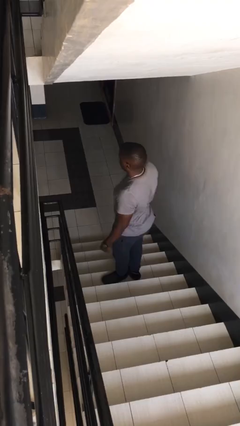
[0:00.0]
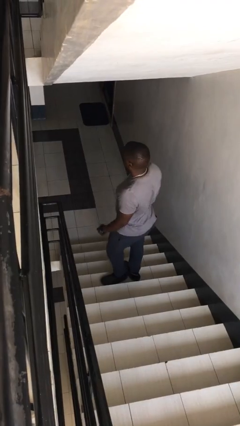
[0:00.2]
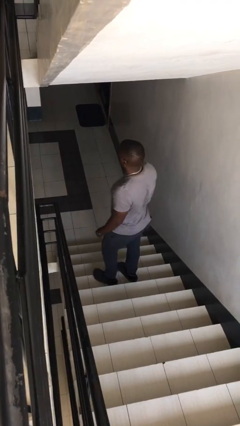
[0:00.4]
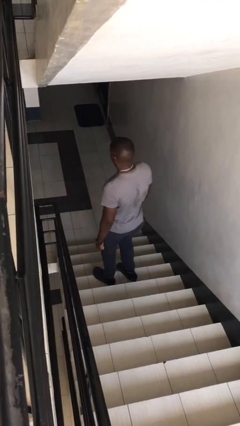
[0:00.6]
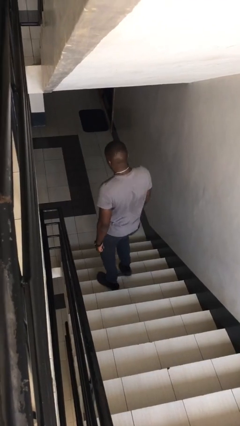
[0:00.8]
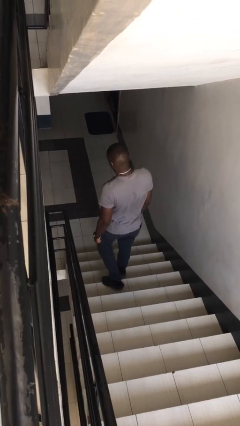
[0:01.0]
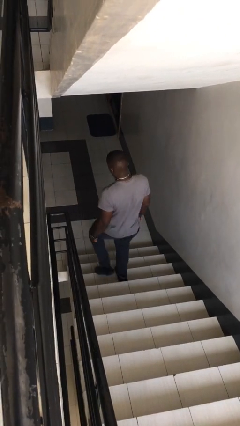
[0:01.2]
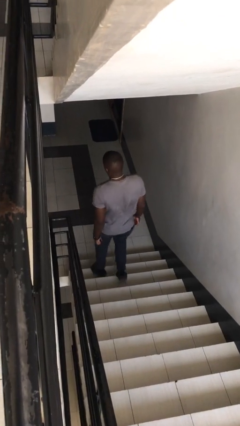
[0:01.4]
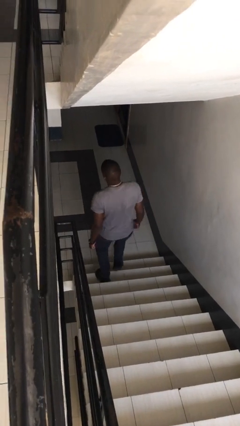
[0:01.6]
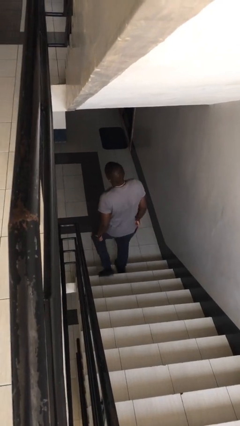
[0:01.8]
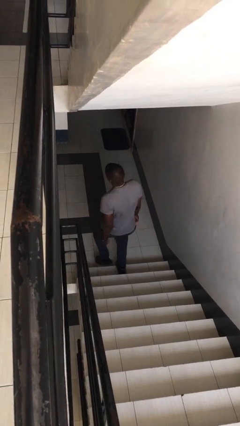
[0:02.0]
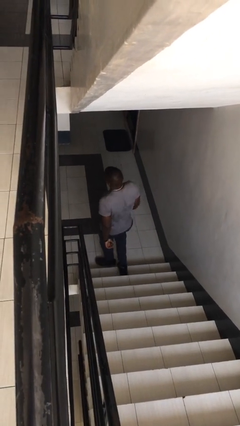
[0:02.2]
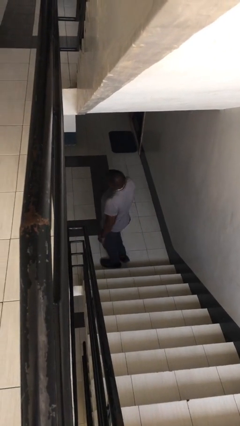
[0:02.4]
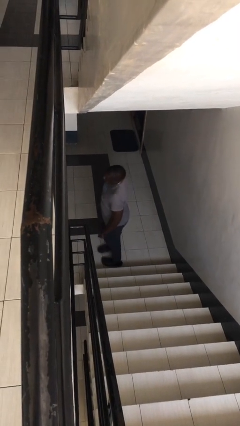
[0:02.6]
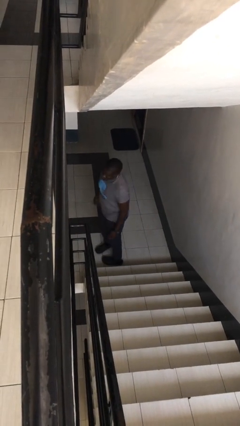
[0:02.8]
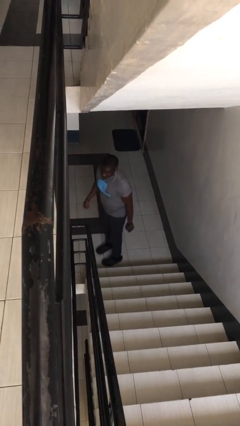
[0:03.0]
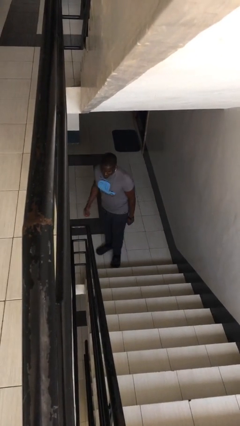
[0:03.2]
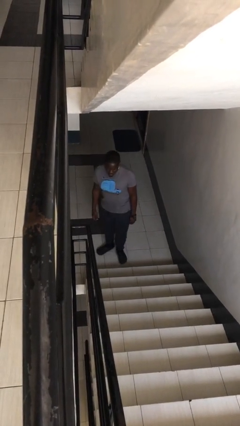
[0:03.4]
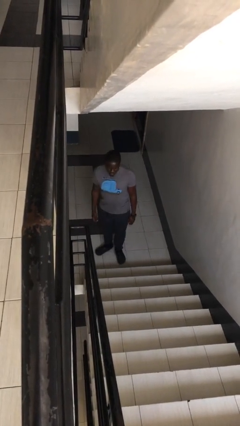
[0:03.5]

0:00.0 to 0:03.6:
person climbs down stairs

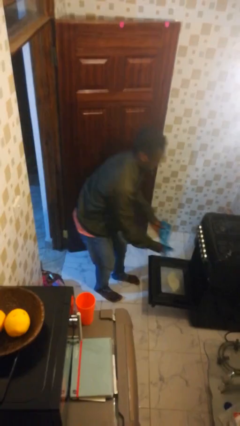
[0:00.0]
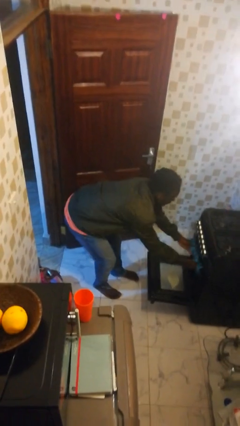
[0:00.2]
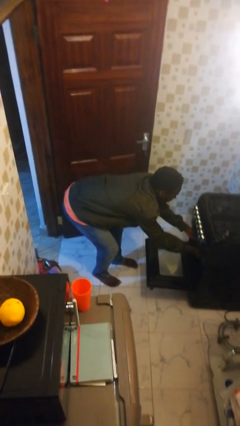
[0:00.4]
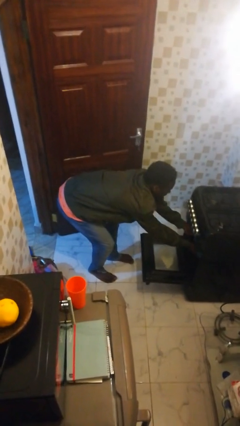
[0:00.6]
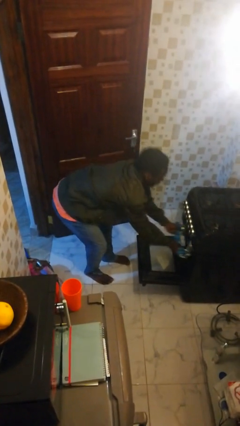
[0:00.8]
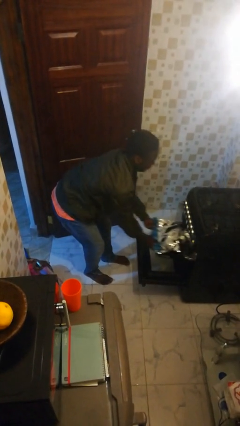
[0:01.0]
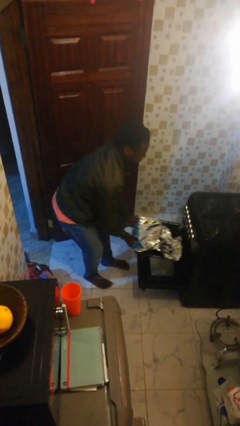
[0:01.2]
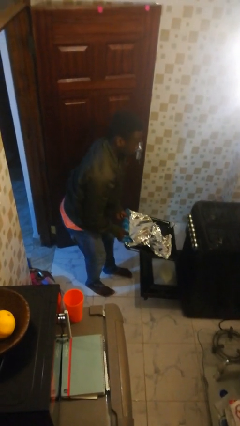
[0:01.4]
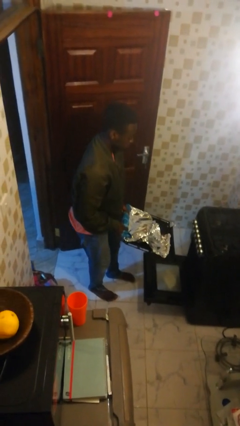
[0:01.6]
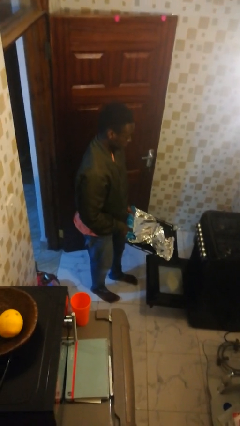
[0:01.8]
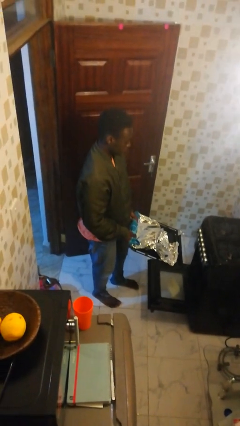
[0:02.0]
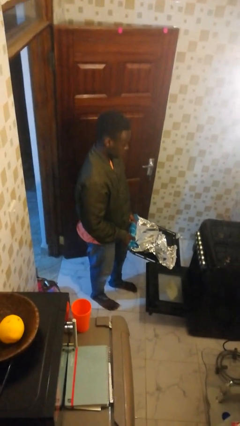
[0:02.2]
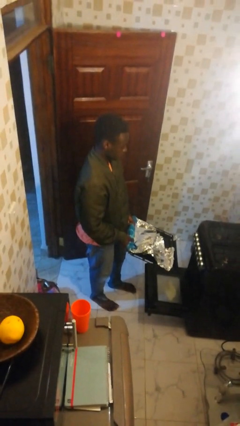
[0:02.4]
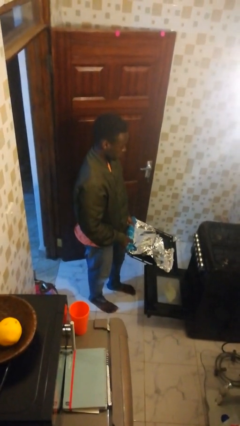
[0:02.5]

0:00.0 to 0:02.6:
person takes object from oven

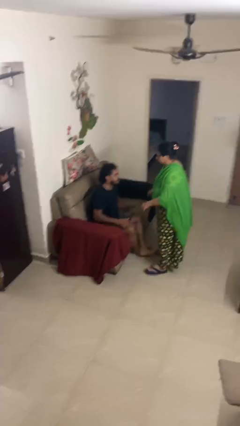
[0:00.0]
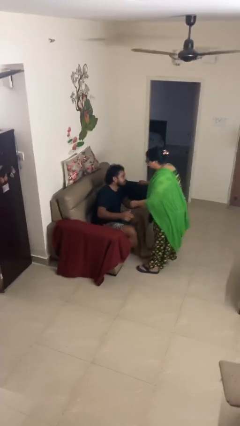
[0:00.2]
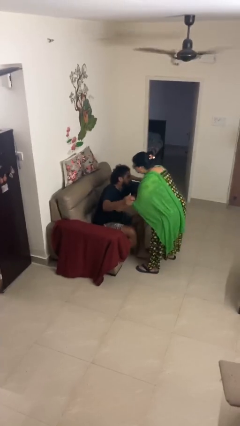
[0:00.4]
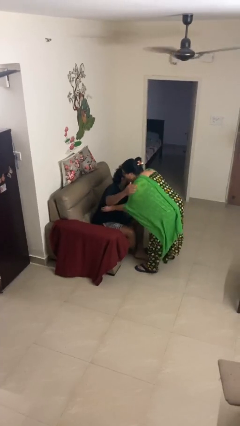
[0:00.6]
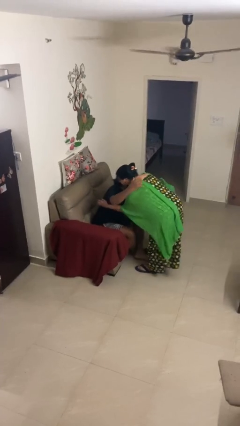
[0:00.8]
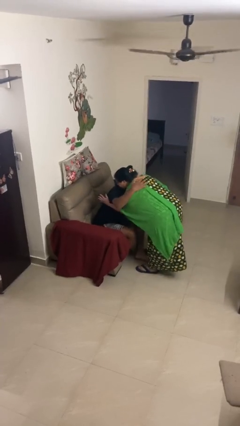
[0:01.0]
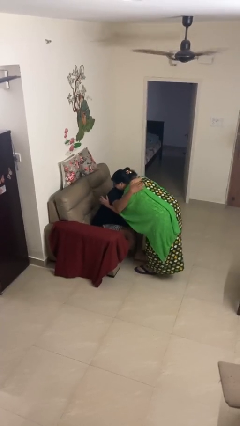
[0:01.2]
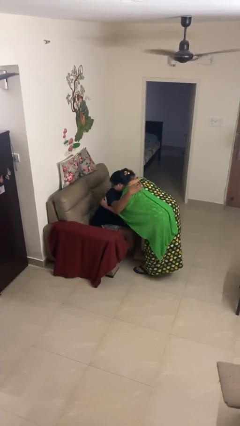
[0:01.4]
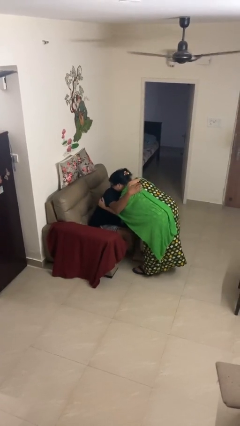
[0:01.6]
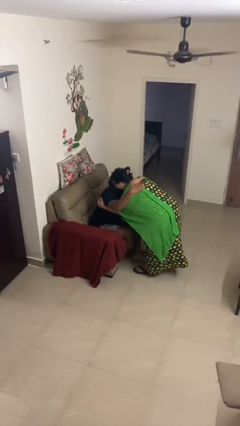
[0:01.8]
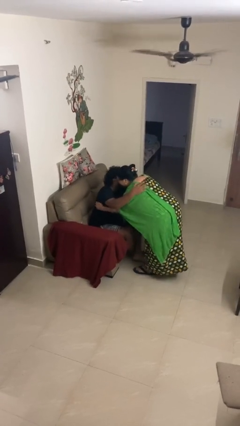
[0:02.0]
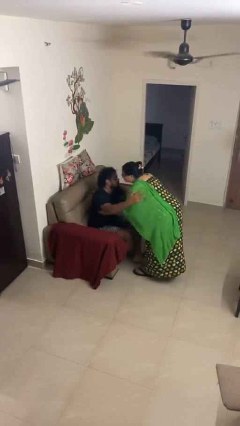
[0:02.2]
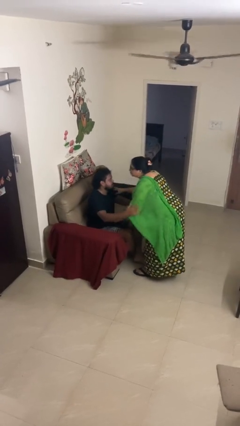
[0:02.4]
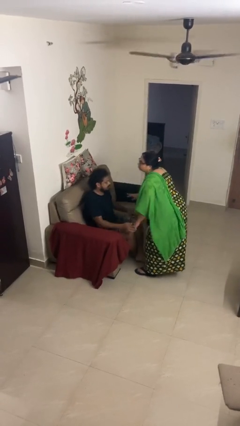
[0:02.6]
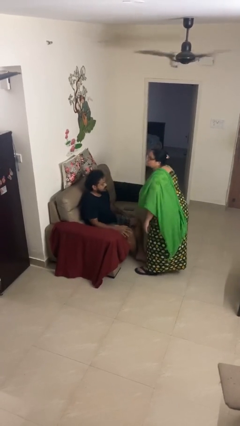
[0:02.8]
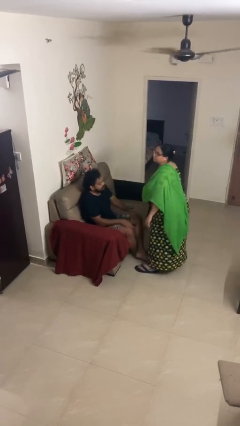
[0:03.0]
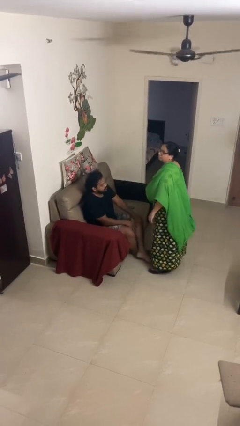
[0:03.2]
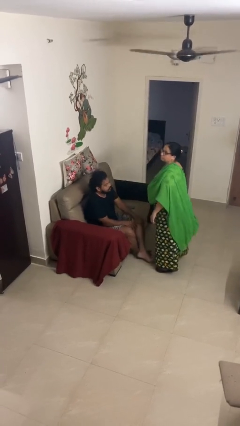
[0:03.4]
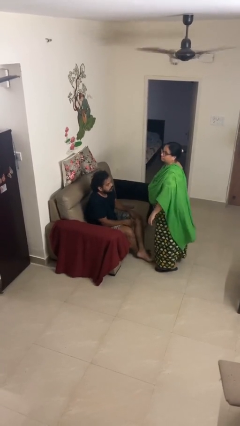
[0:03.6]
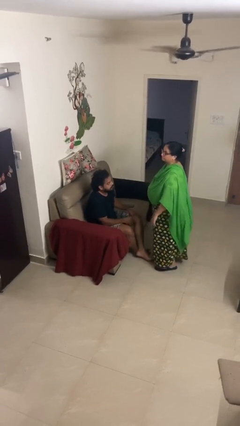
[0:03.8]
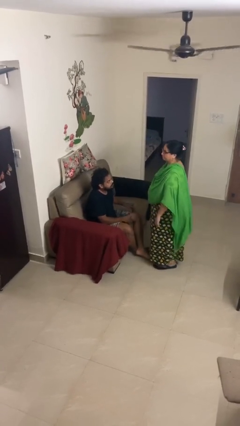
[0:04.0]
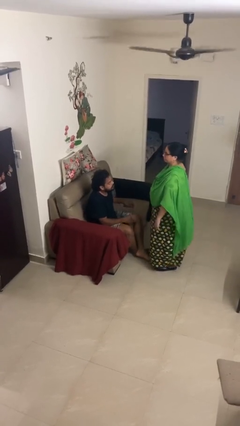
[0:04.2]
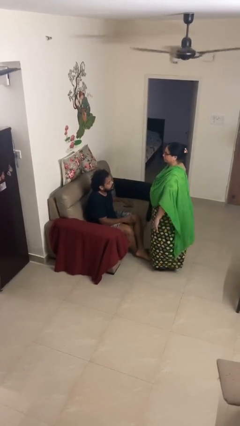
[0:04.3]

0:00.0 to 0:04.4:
person embraces person

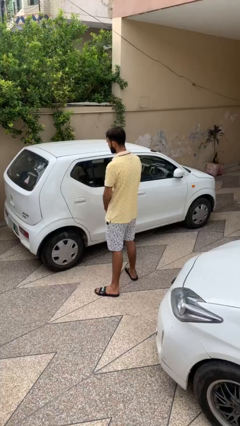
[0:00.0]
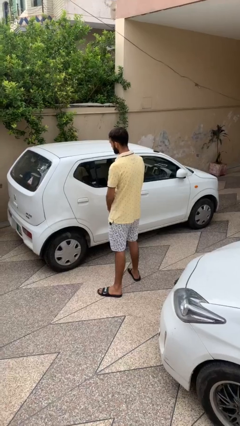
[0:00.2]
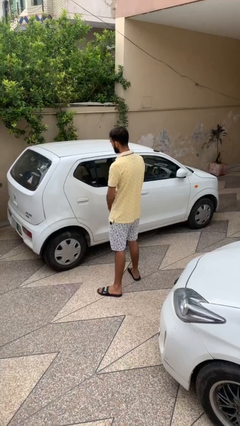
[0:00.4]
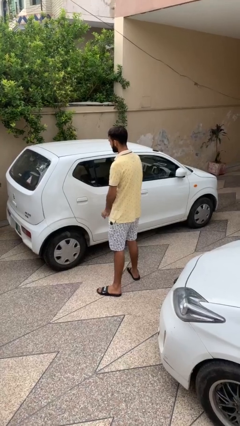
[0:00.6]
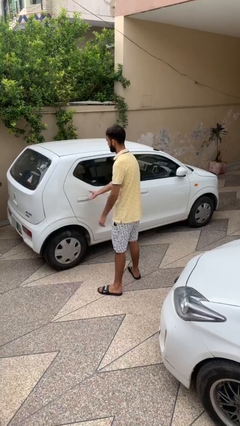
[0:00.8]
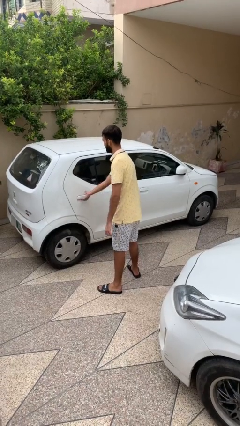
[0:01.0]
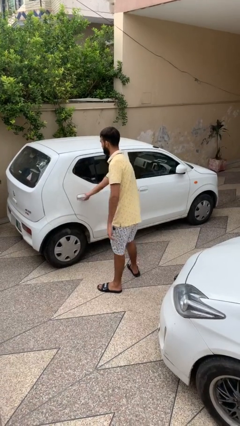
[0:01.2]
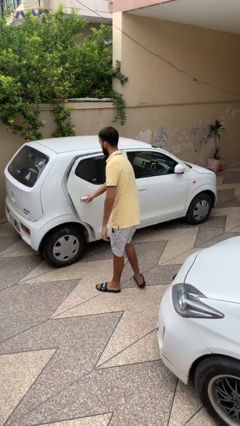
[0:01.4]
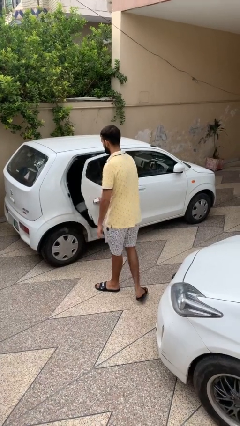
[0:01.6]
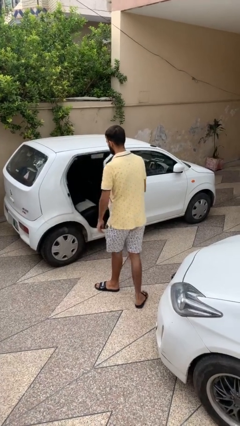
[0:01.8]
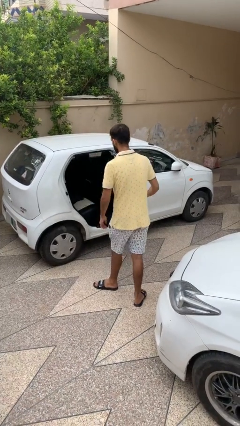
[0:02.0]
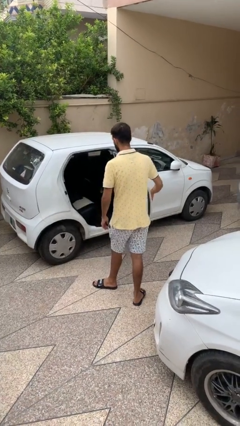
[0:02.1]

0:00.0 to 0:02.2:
person opens car door

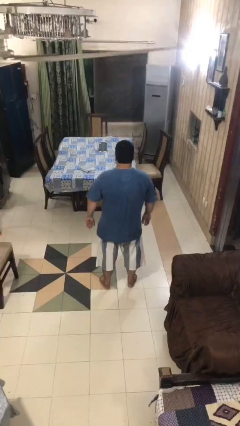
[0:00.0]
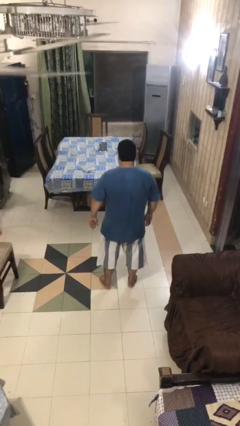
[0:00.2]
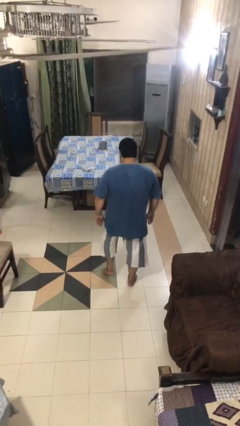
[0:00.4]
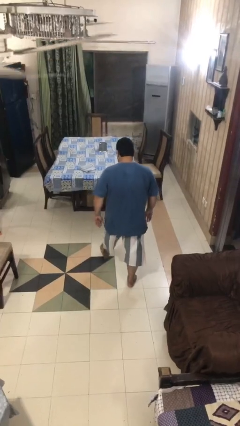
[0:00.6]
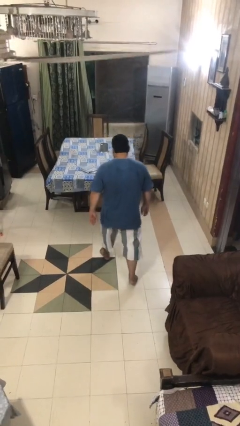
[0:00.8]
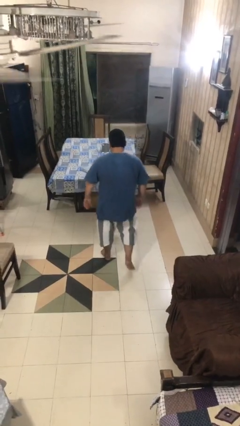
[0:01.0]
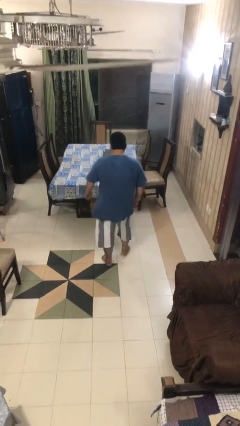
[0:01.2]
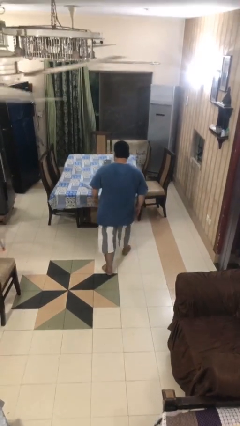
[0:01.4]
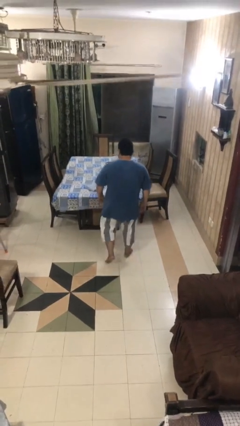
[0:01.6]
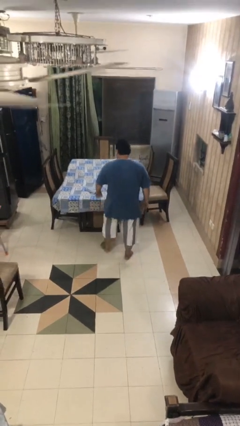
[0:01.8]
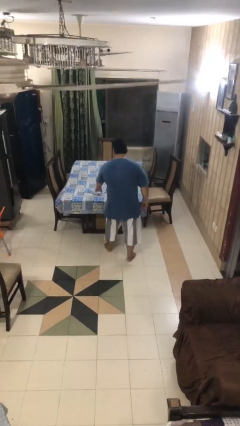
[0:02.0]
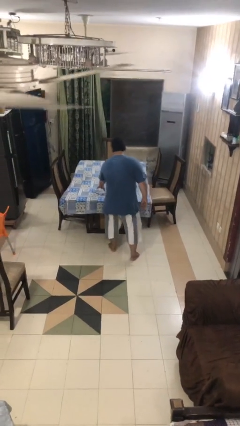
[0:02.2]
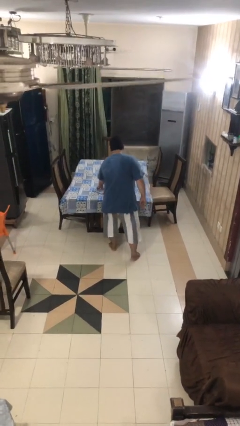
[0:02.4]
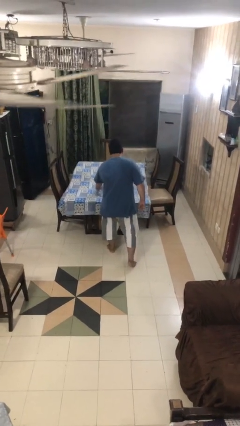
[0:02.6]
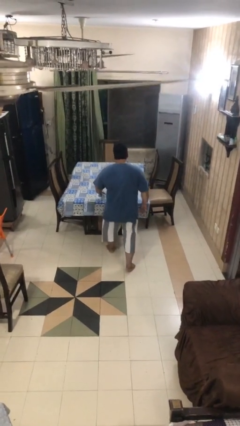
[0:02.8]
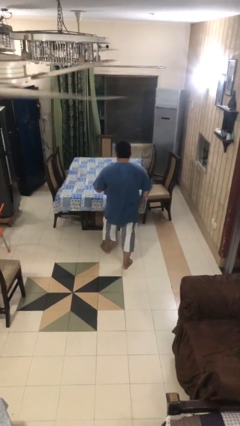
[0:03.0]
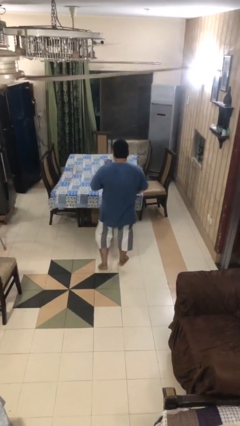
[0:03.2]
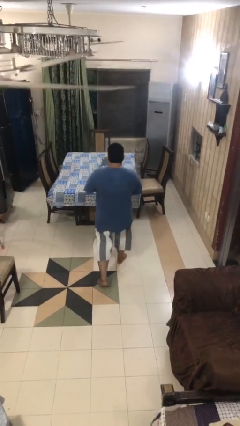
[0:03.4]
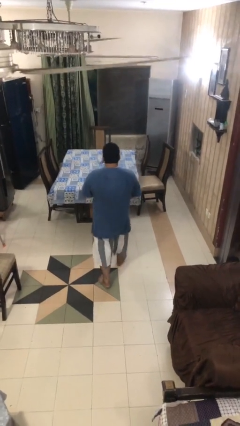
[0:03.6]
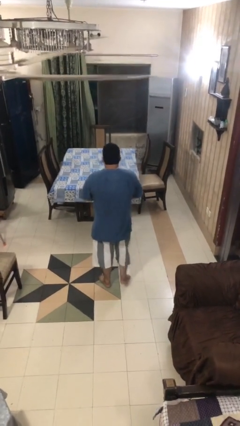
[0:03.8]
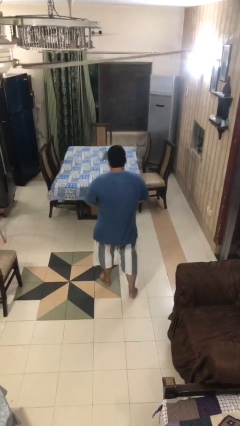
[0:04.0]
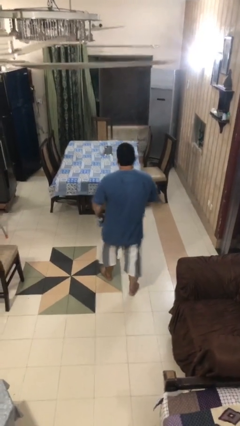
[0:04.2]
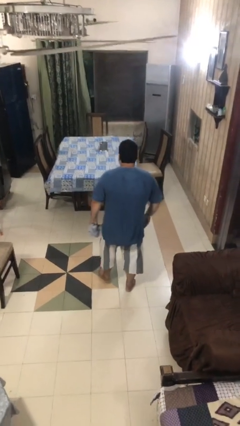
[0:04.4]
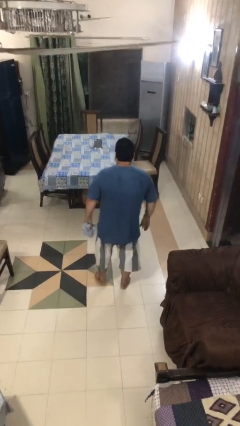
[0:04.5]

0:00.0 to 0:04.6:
person picks up object from table
